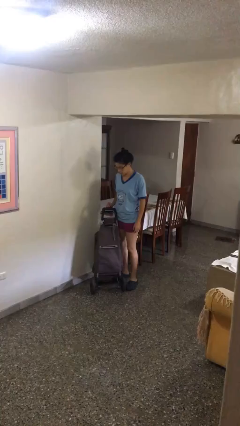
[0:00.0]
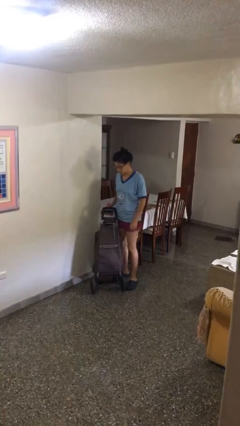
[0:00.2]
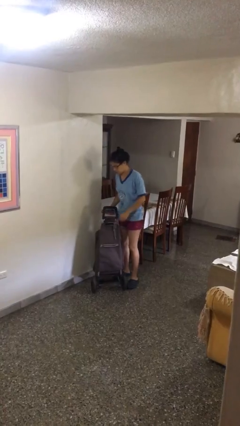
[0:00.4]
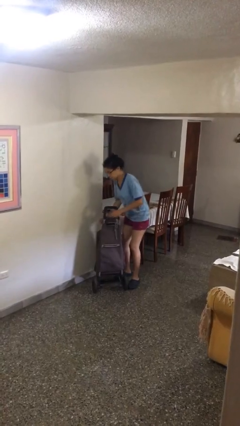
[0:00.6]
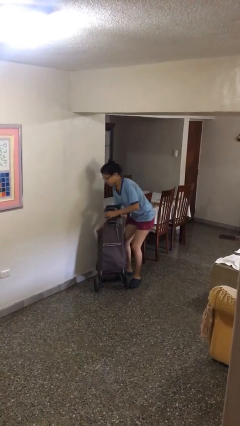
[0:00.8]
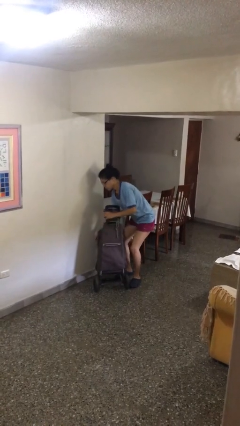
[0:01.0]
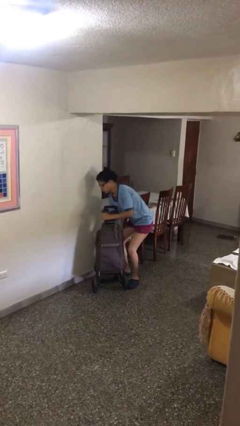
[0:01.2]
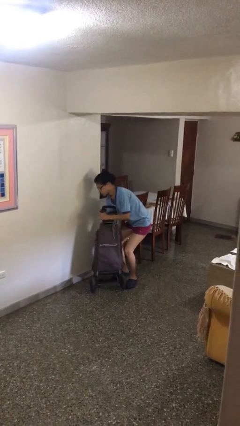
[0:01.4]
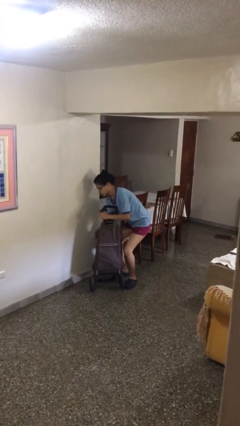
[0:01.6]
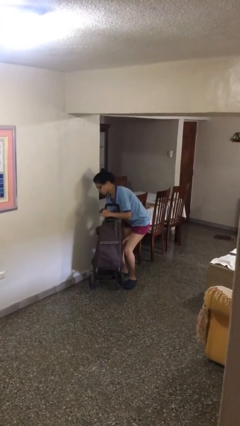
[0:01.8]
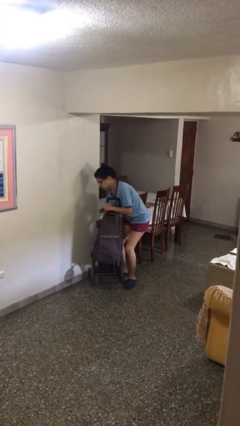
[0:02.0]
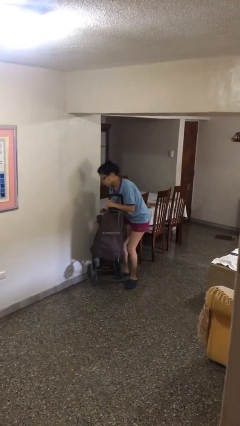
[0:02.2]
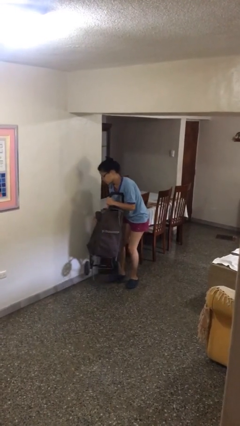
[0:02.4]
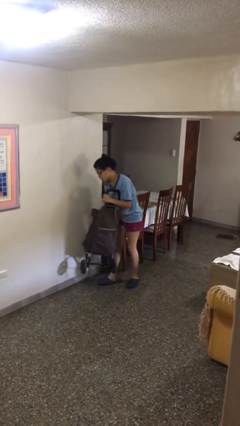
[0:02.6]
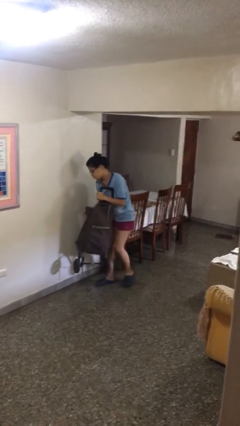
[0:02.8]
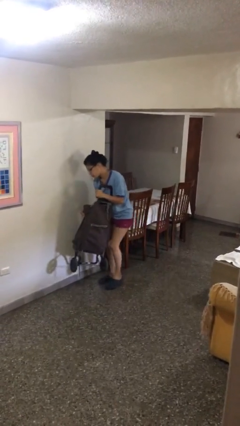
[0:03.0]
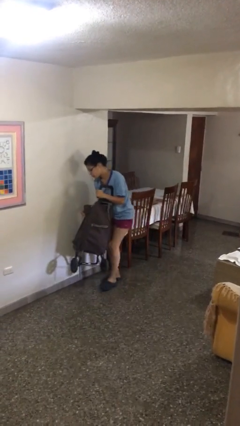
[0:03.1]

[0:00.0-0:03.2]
person picks up object from floor

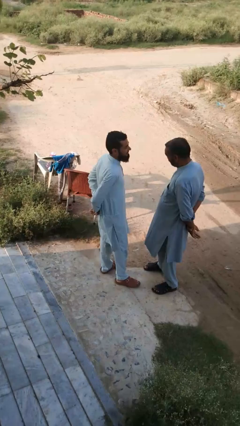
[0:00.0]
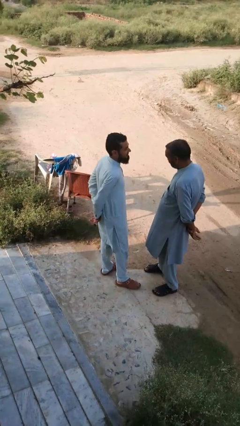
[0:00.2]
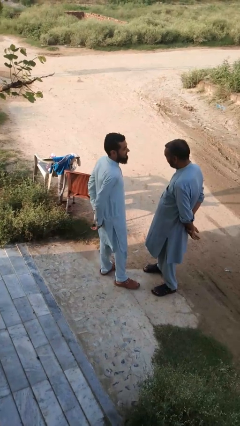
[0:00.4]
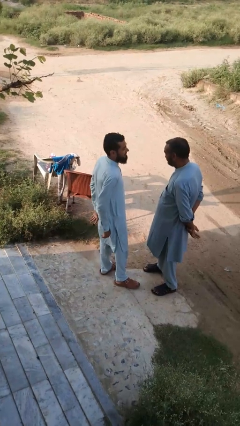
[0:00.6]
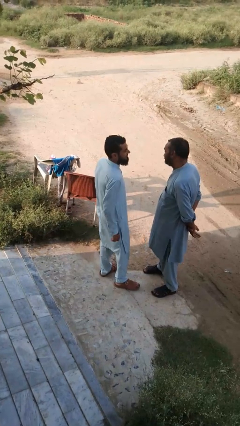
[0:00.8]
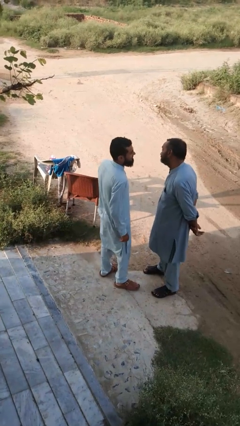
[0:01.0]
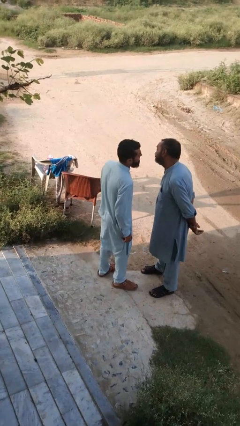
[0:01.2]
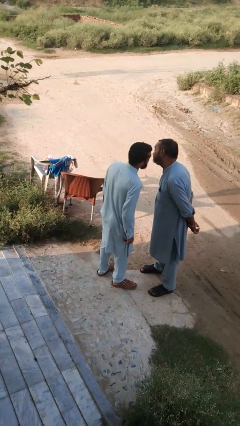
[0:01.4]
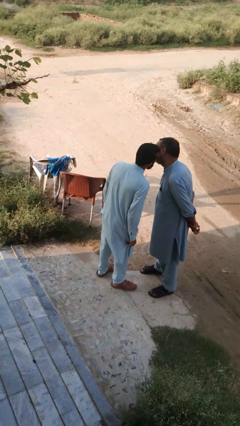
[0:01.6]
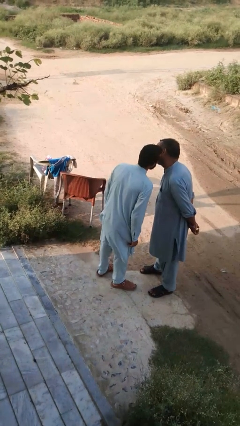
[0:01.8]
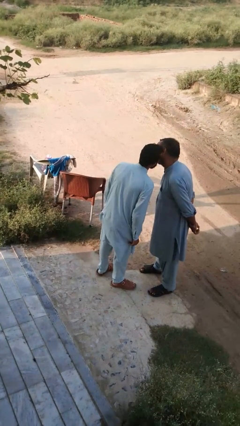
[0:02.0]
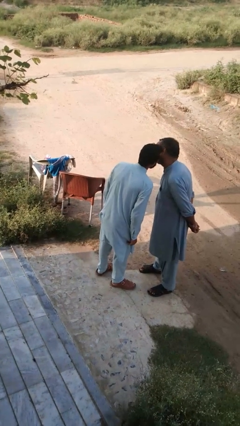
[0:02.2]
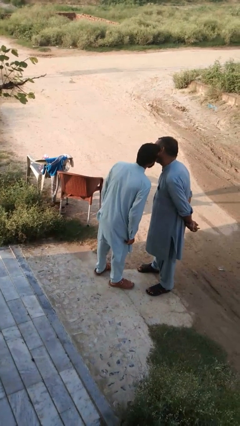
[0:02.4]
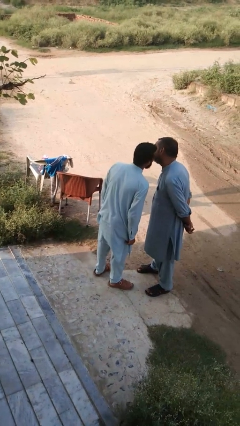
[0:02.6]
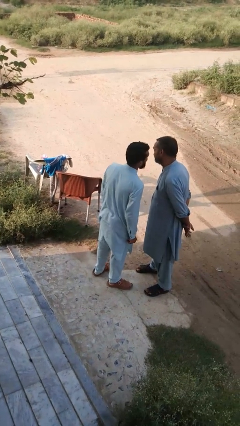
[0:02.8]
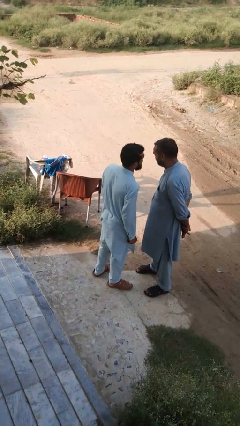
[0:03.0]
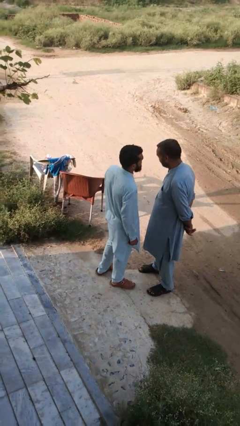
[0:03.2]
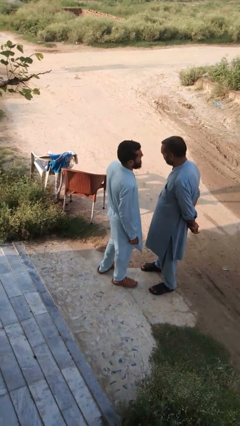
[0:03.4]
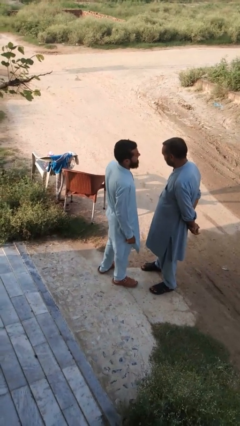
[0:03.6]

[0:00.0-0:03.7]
person kisses cheek of person

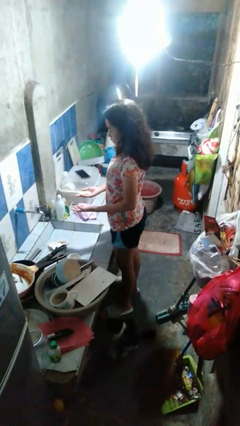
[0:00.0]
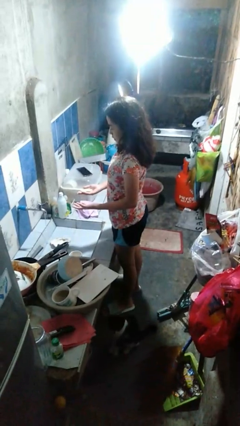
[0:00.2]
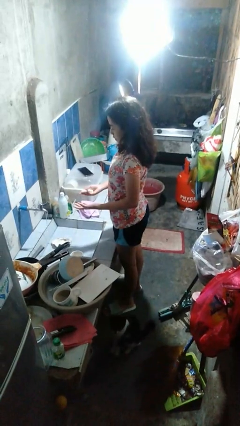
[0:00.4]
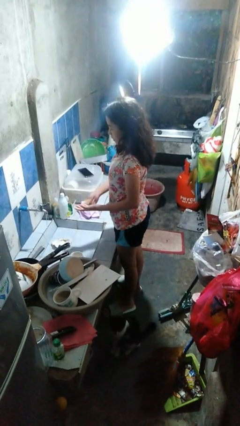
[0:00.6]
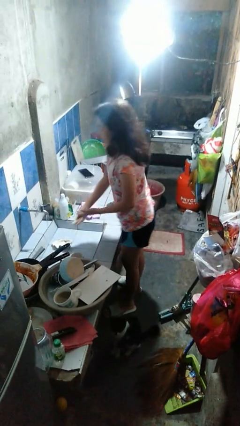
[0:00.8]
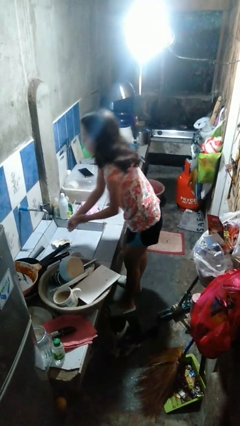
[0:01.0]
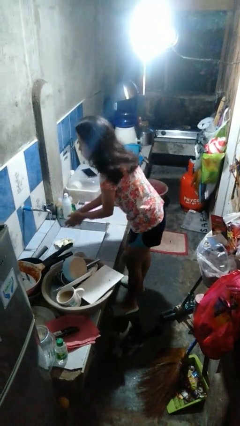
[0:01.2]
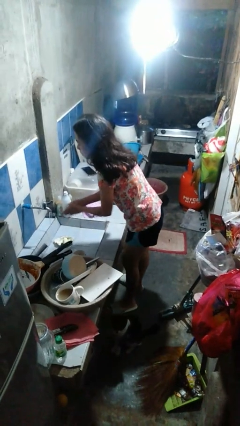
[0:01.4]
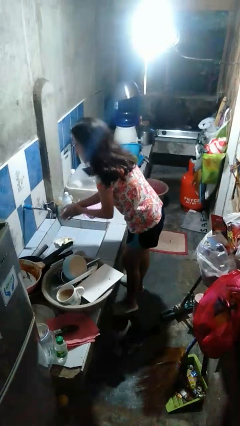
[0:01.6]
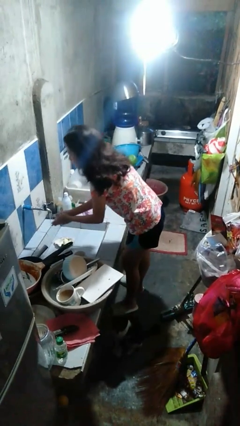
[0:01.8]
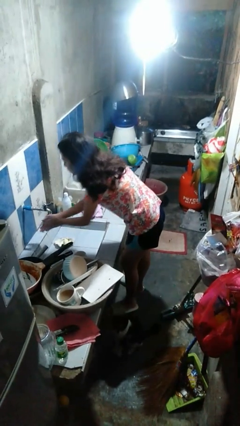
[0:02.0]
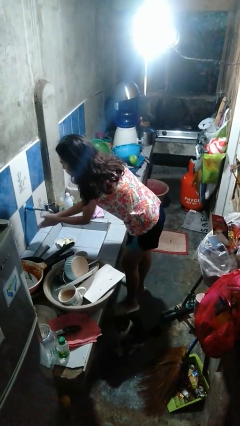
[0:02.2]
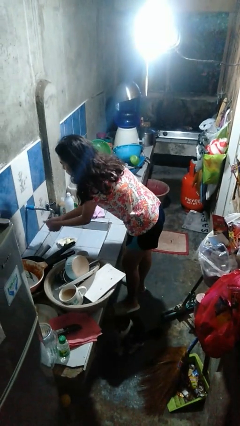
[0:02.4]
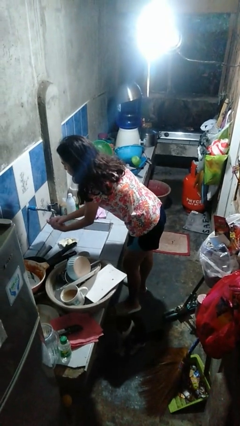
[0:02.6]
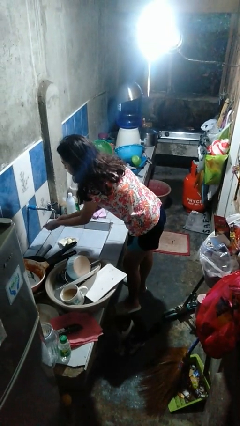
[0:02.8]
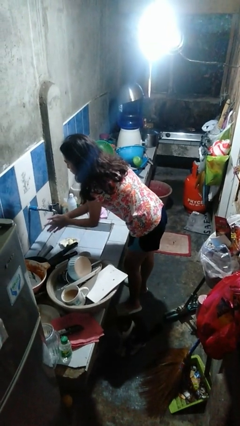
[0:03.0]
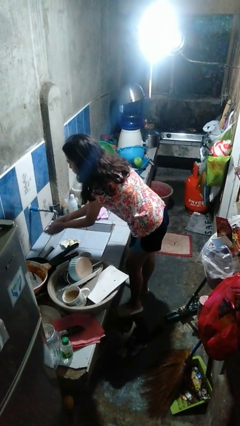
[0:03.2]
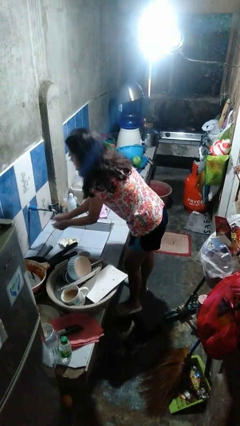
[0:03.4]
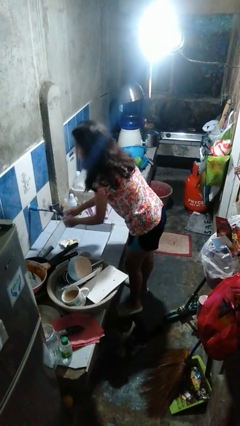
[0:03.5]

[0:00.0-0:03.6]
person washes hands

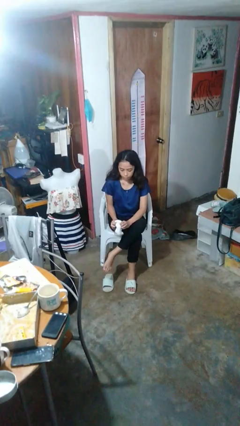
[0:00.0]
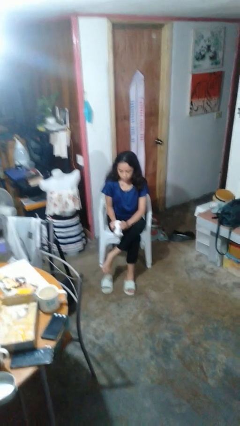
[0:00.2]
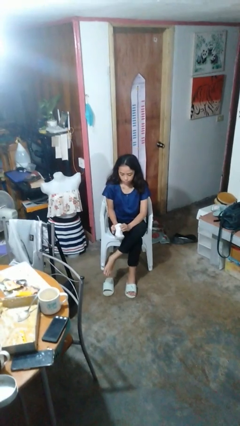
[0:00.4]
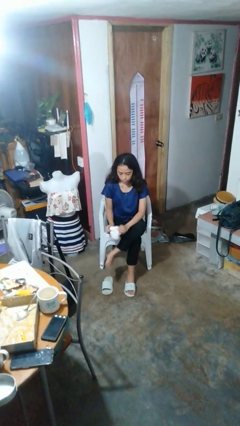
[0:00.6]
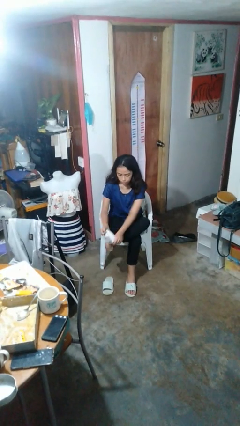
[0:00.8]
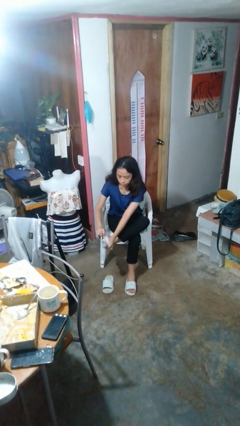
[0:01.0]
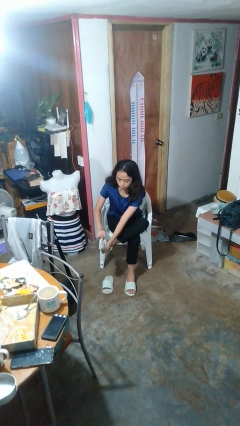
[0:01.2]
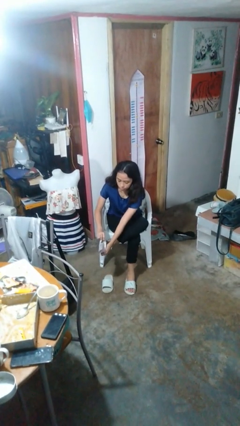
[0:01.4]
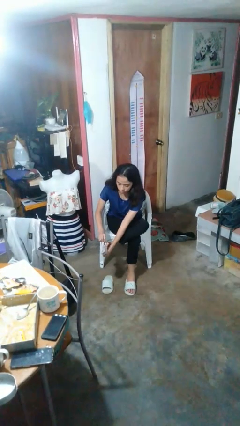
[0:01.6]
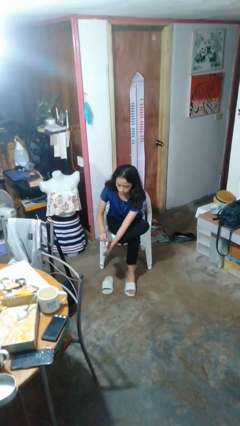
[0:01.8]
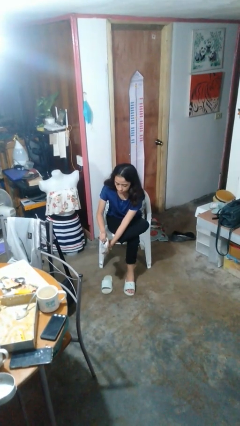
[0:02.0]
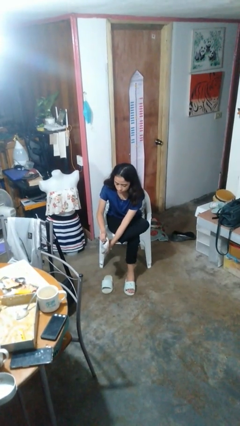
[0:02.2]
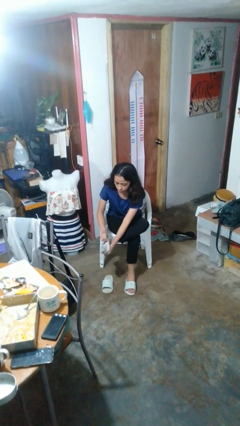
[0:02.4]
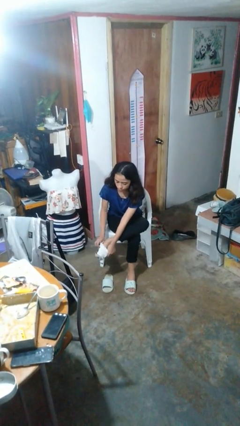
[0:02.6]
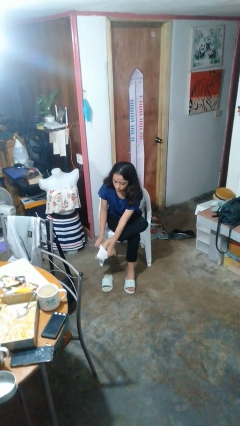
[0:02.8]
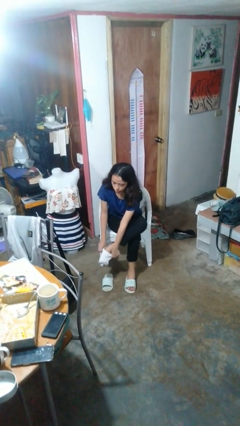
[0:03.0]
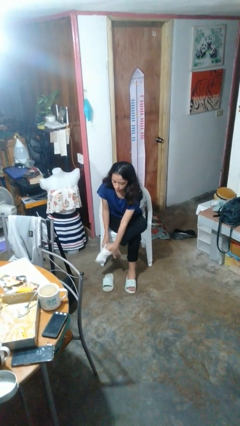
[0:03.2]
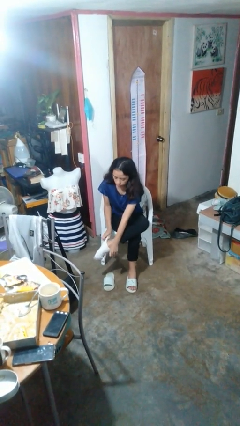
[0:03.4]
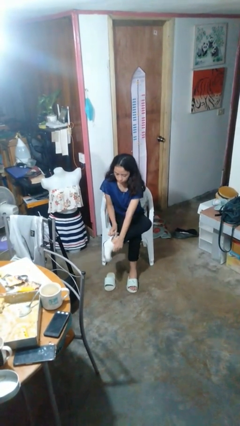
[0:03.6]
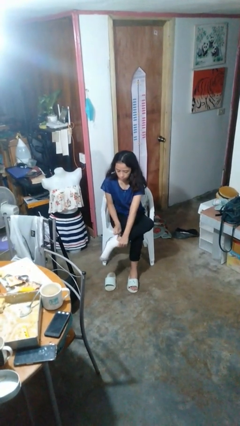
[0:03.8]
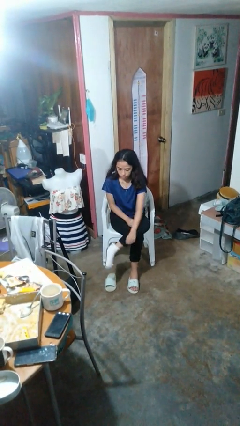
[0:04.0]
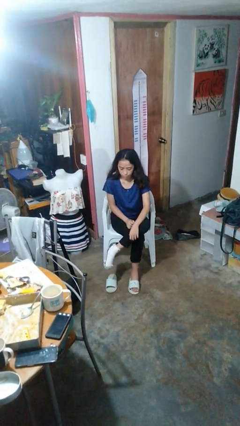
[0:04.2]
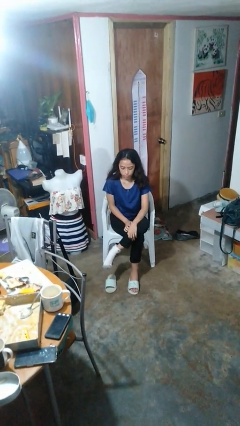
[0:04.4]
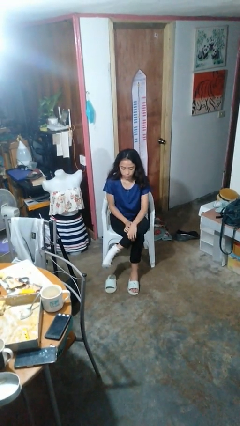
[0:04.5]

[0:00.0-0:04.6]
person puts on socks

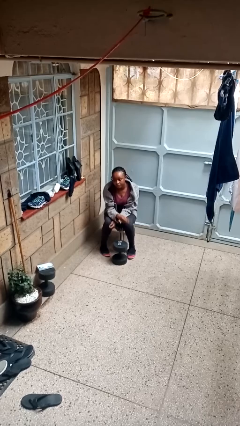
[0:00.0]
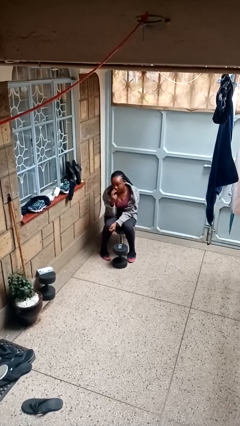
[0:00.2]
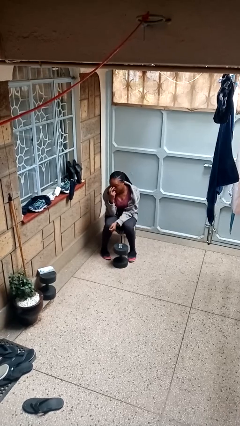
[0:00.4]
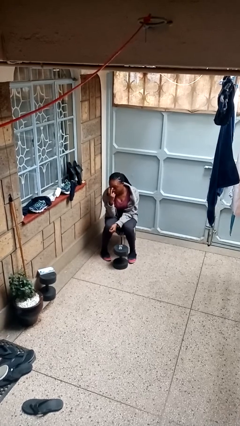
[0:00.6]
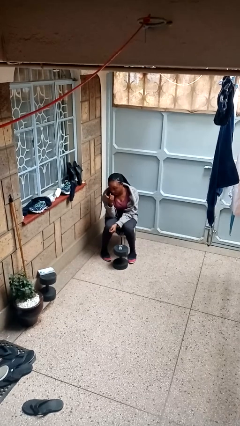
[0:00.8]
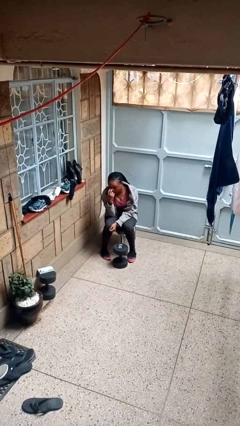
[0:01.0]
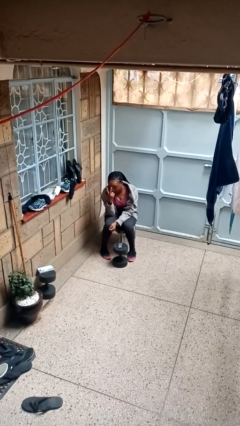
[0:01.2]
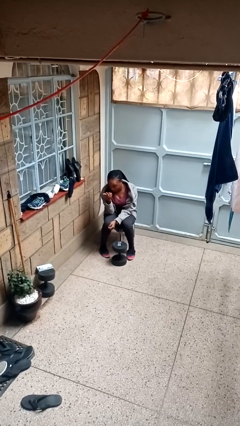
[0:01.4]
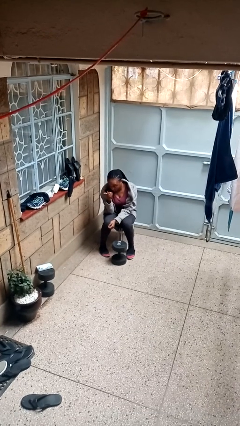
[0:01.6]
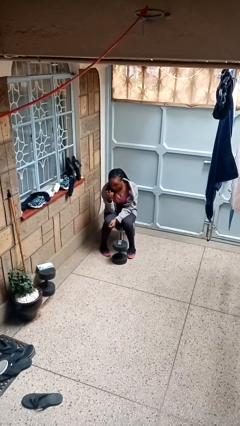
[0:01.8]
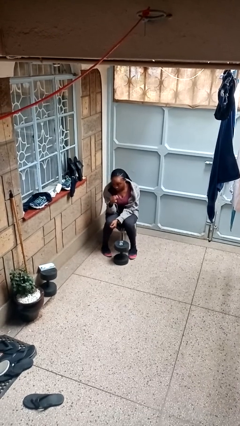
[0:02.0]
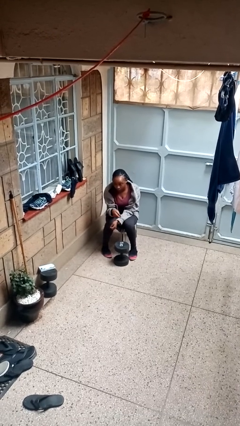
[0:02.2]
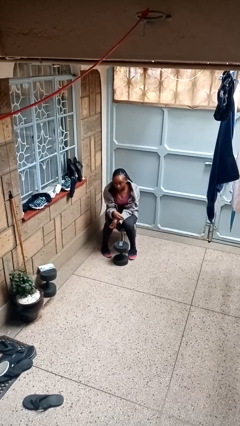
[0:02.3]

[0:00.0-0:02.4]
person gestures watch closely

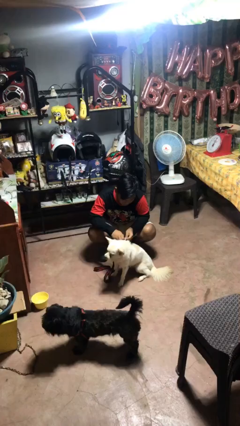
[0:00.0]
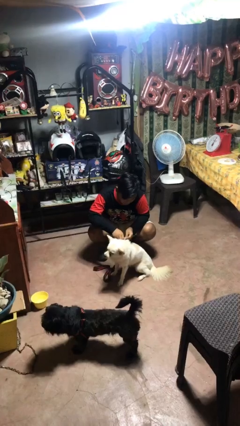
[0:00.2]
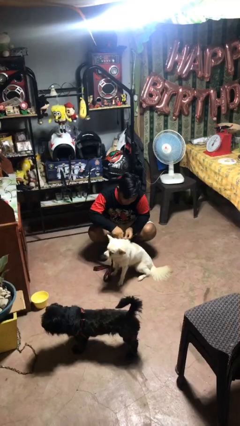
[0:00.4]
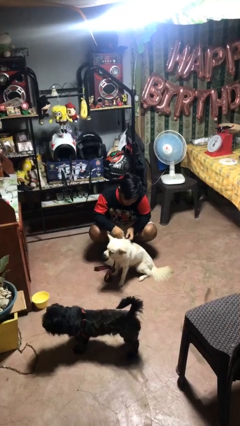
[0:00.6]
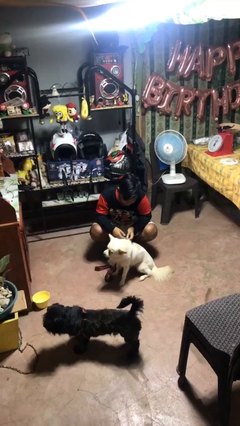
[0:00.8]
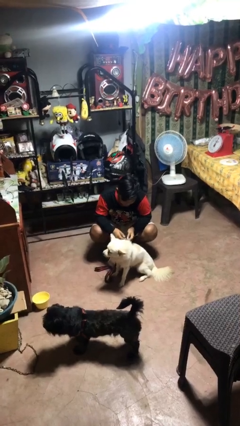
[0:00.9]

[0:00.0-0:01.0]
person attaches leash to dog
